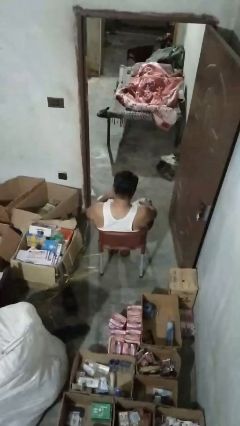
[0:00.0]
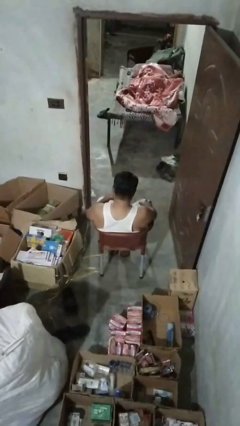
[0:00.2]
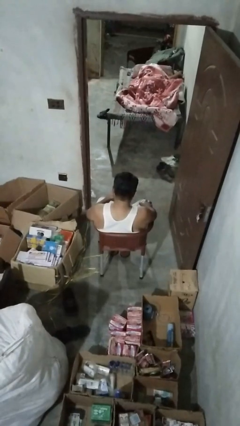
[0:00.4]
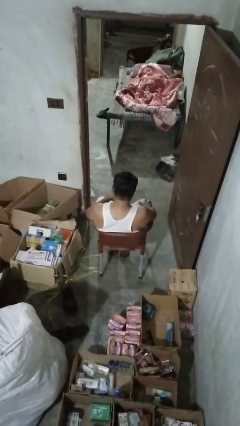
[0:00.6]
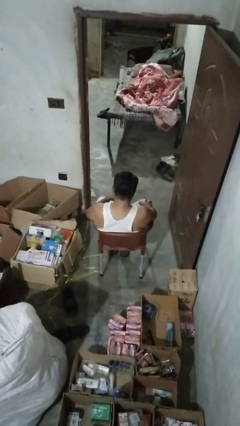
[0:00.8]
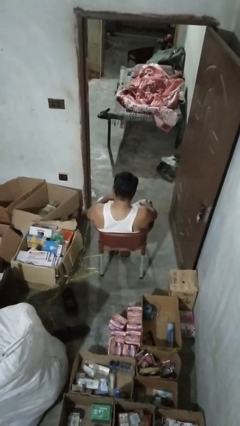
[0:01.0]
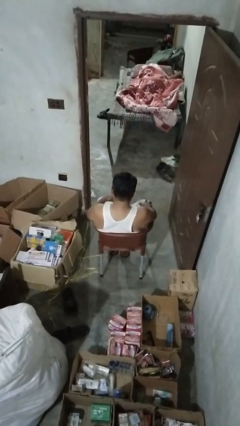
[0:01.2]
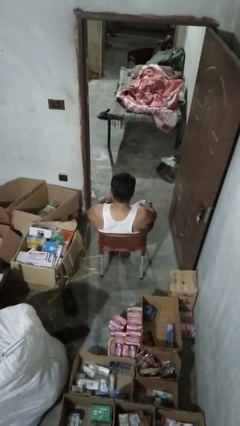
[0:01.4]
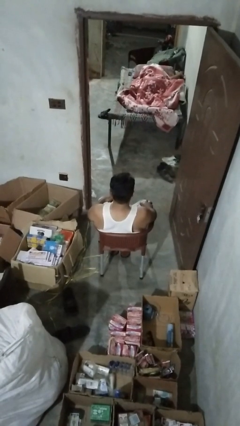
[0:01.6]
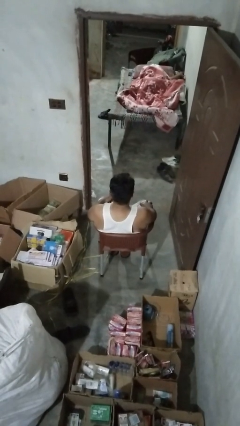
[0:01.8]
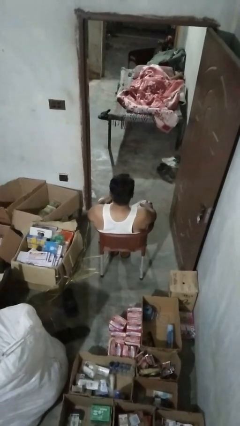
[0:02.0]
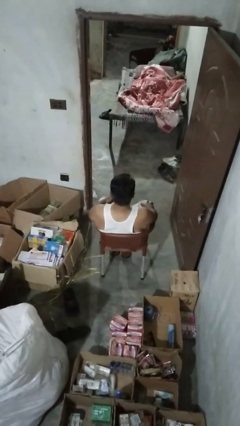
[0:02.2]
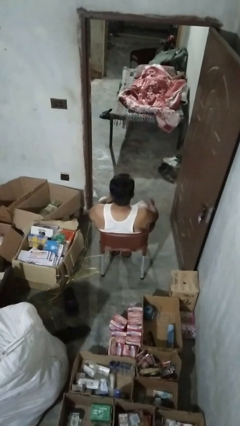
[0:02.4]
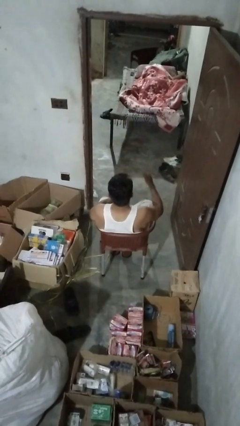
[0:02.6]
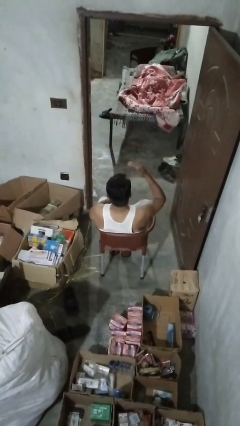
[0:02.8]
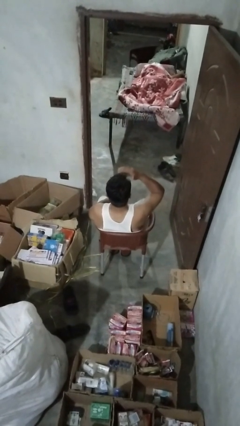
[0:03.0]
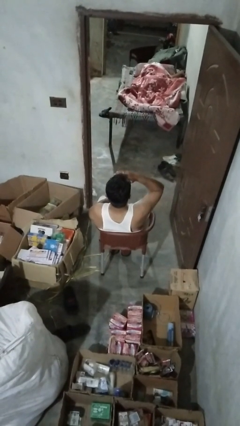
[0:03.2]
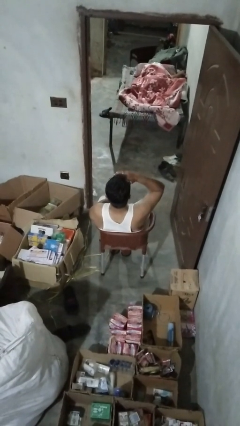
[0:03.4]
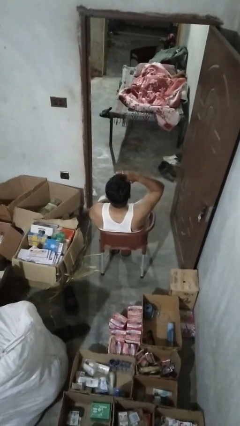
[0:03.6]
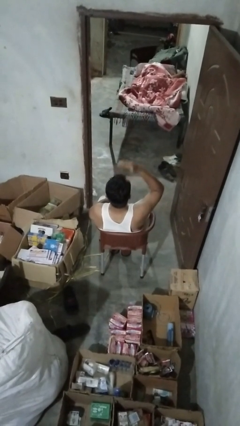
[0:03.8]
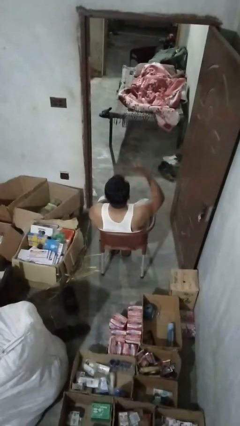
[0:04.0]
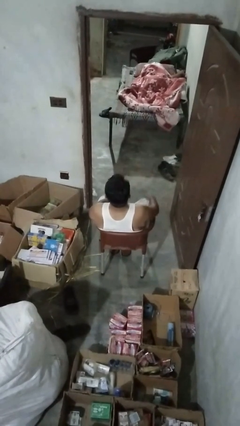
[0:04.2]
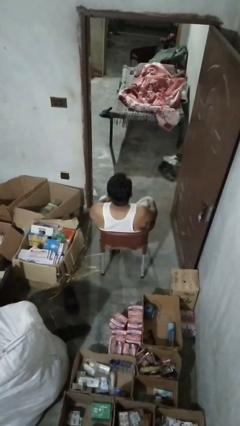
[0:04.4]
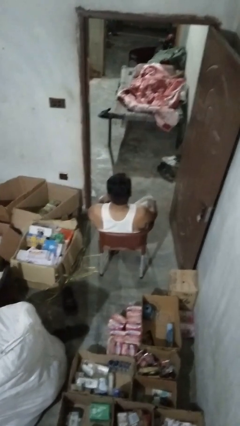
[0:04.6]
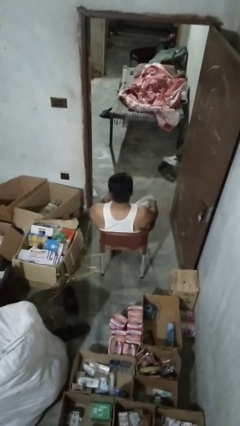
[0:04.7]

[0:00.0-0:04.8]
person shades eyes

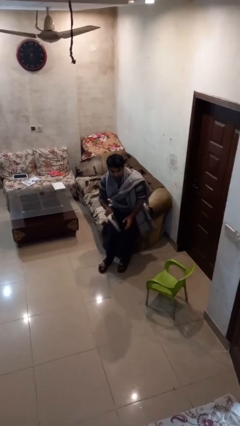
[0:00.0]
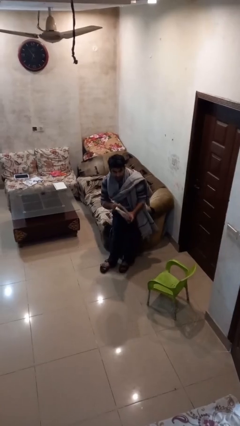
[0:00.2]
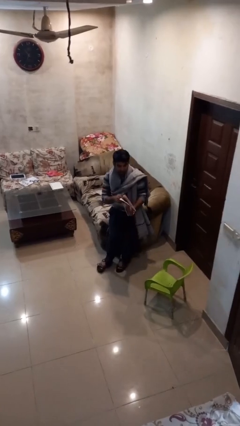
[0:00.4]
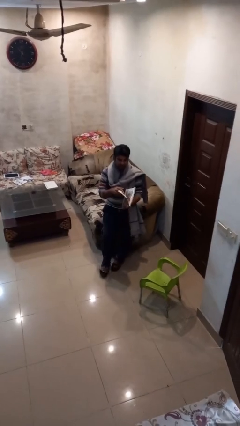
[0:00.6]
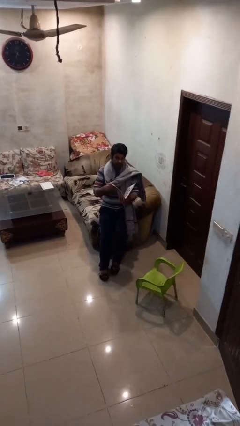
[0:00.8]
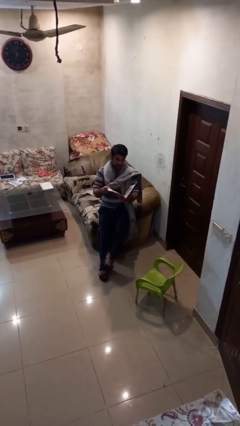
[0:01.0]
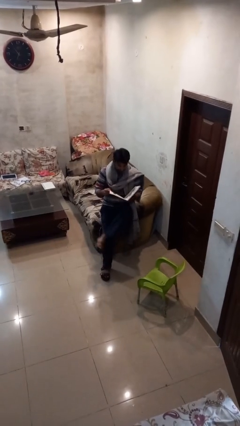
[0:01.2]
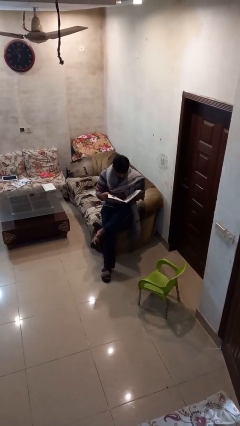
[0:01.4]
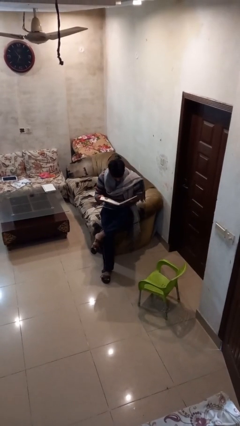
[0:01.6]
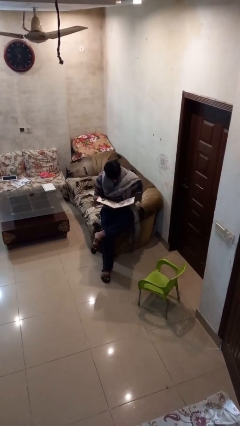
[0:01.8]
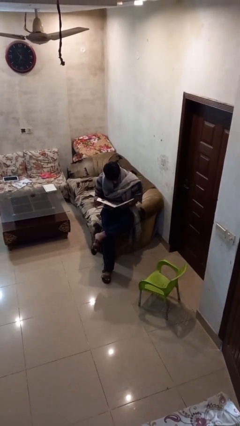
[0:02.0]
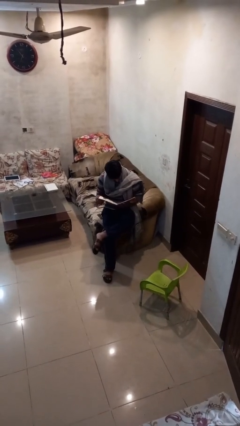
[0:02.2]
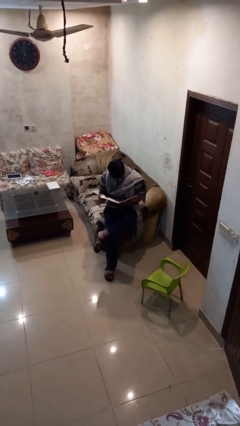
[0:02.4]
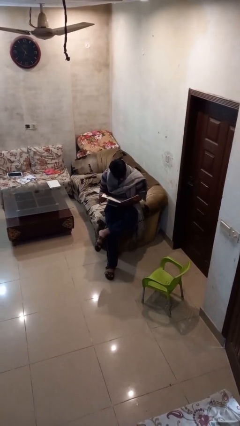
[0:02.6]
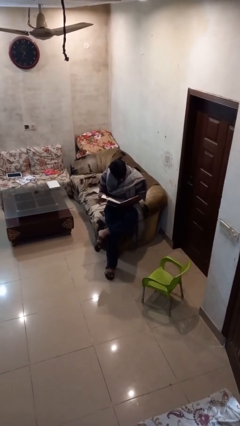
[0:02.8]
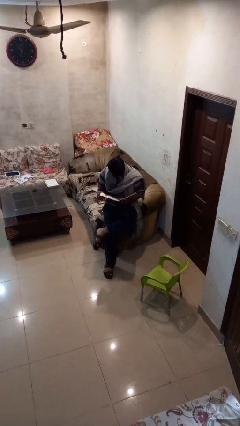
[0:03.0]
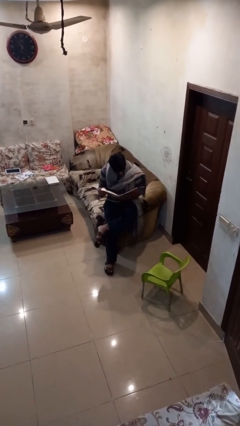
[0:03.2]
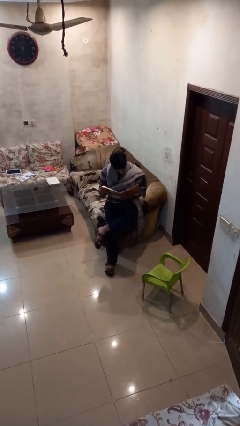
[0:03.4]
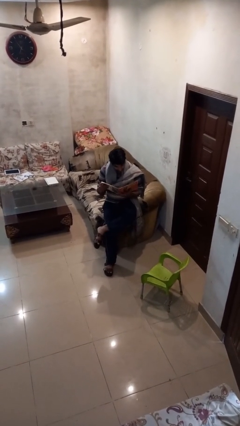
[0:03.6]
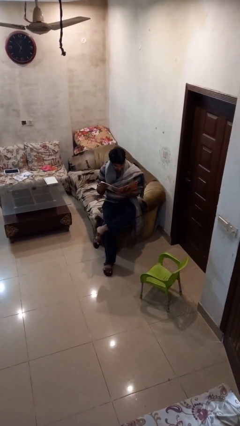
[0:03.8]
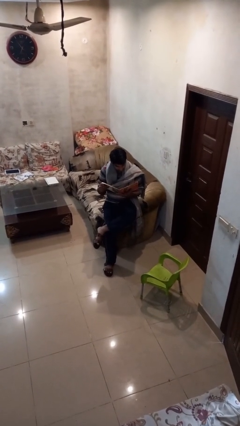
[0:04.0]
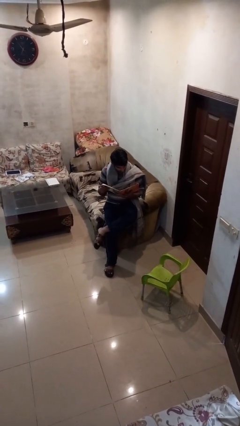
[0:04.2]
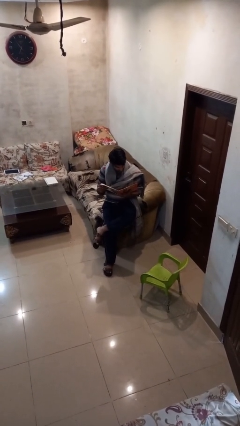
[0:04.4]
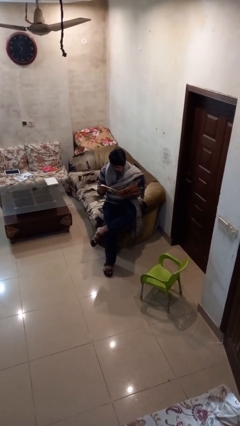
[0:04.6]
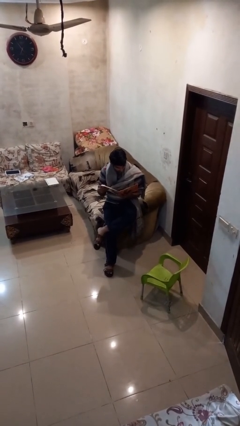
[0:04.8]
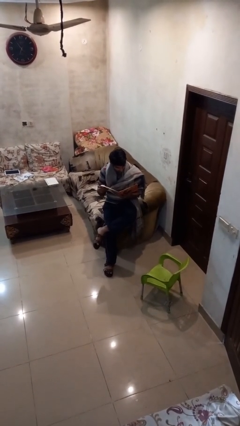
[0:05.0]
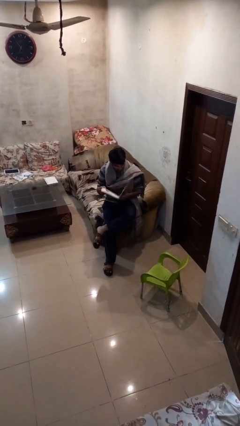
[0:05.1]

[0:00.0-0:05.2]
person reads document

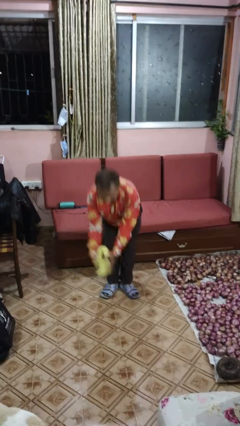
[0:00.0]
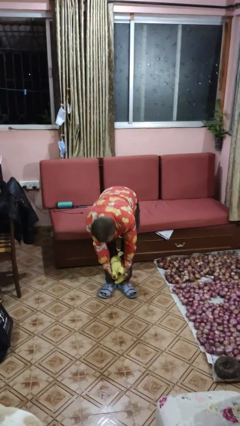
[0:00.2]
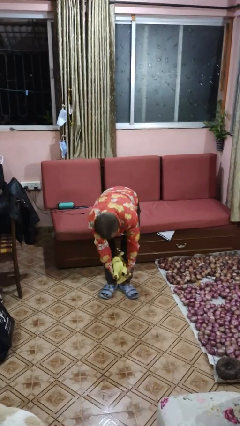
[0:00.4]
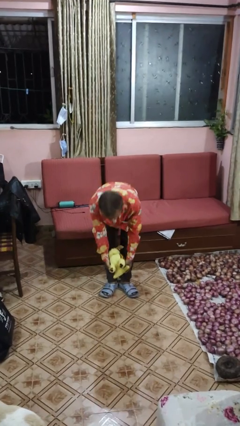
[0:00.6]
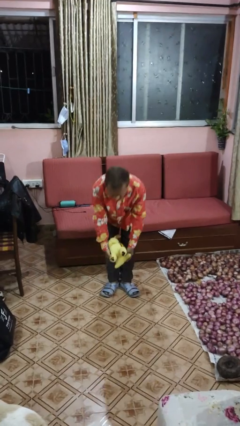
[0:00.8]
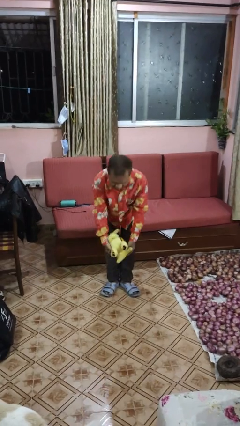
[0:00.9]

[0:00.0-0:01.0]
person catches dropped object

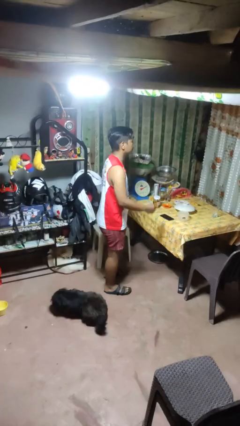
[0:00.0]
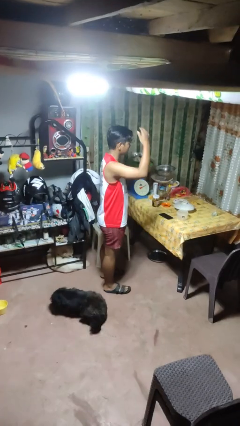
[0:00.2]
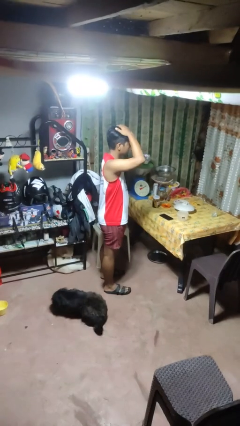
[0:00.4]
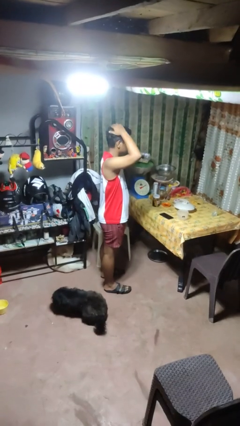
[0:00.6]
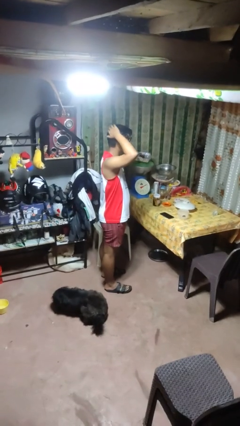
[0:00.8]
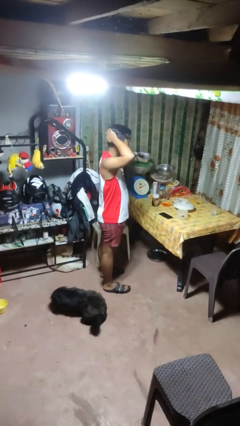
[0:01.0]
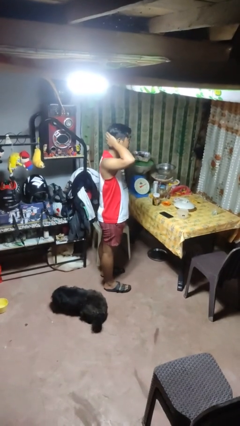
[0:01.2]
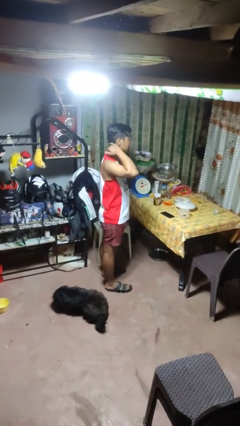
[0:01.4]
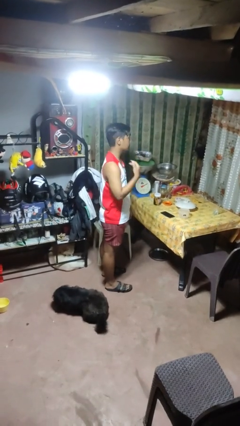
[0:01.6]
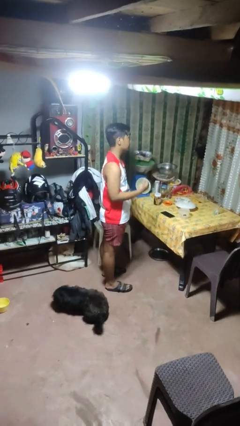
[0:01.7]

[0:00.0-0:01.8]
person pats head

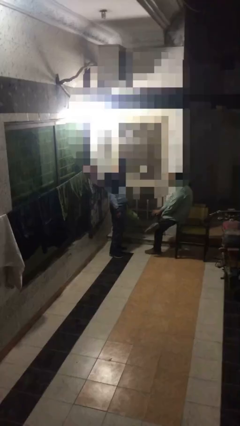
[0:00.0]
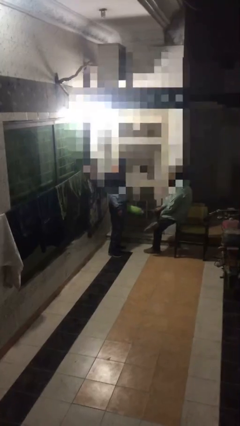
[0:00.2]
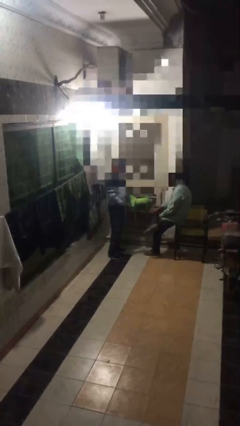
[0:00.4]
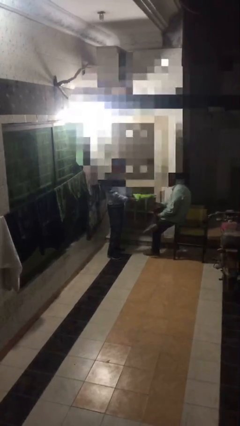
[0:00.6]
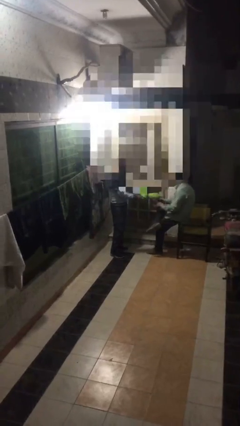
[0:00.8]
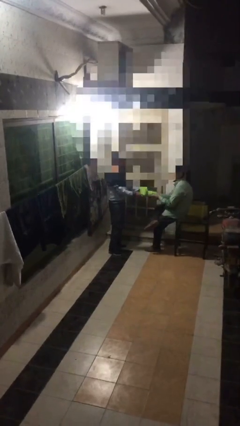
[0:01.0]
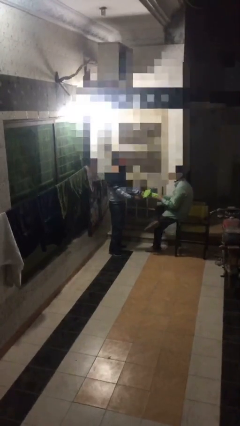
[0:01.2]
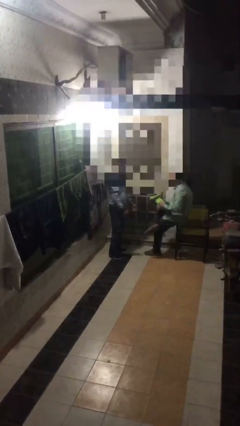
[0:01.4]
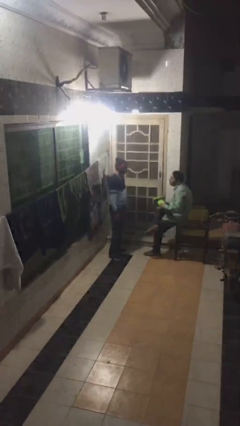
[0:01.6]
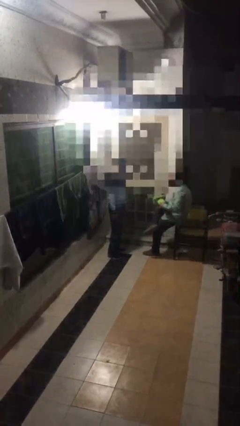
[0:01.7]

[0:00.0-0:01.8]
person transfers object to person

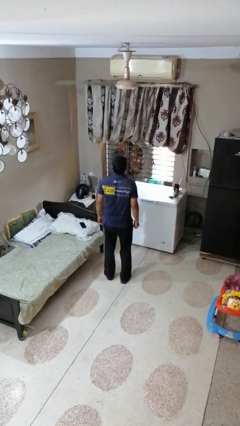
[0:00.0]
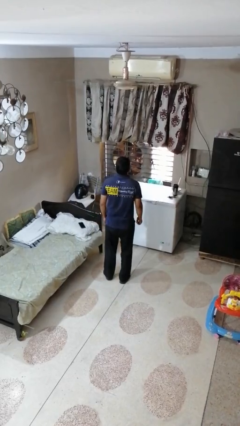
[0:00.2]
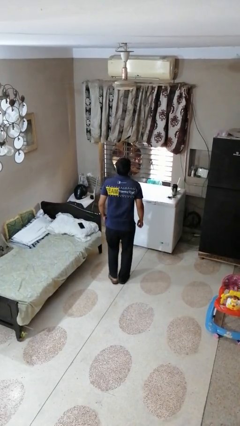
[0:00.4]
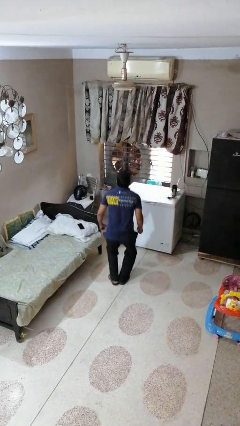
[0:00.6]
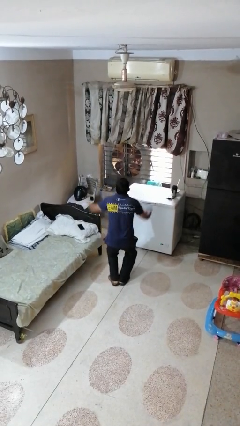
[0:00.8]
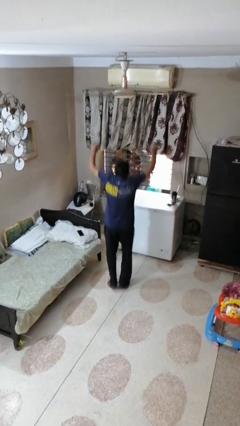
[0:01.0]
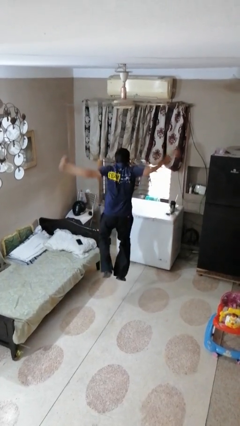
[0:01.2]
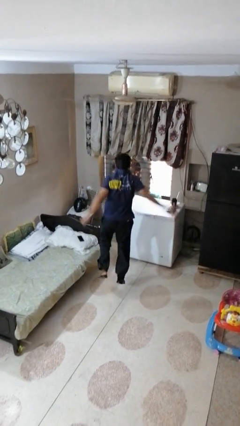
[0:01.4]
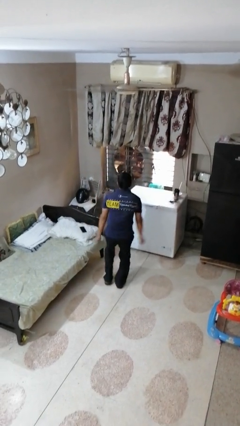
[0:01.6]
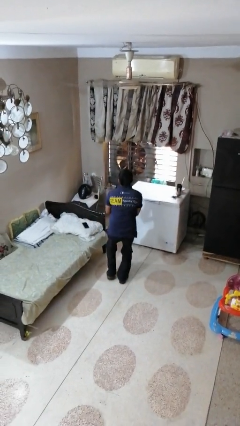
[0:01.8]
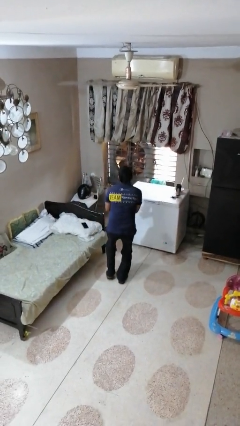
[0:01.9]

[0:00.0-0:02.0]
person jumps

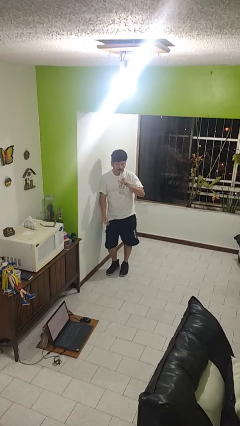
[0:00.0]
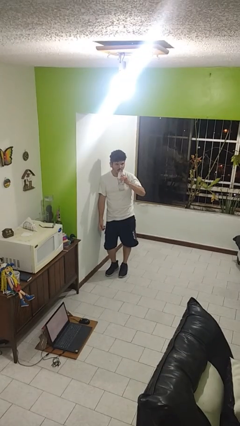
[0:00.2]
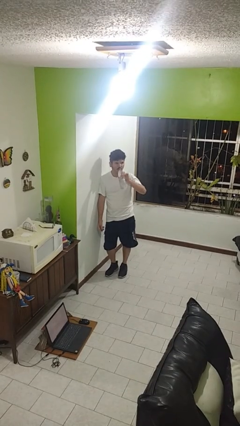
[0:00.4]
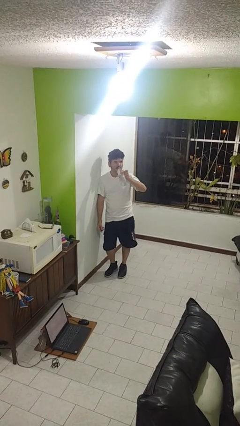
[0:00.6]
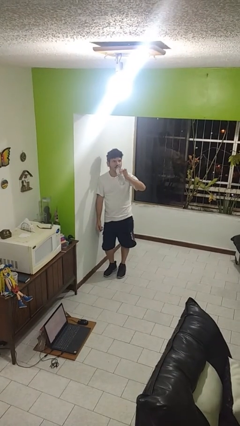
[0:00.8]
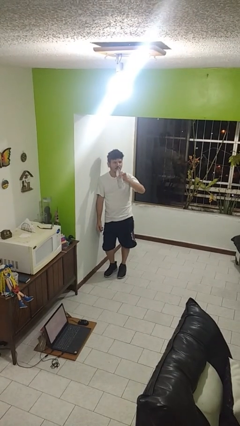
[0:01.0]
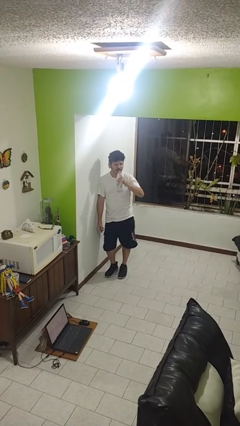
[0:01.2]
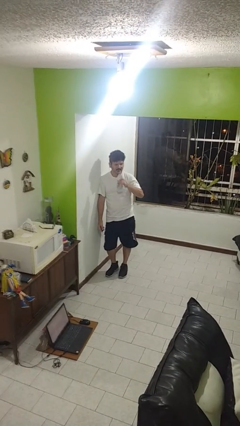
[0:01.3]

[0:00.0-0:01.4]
person drinks from bottle
